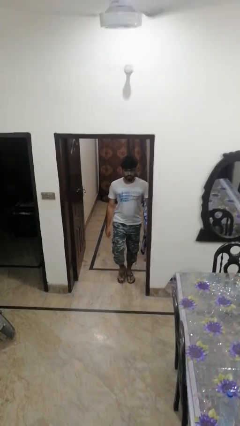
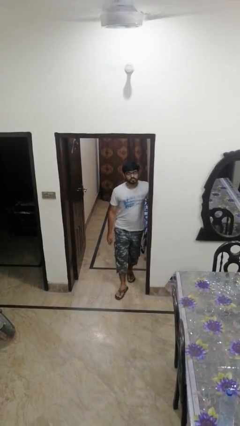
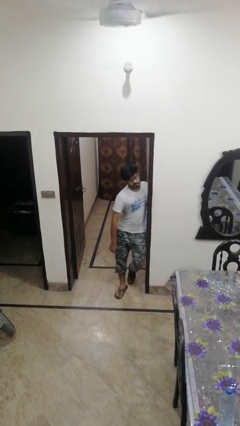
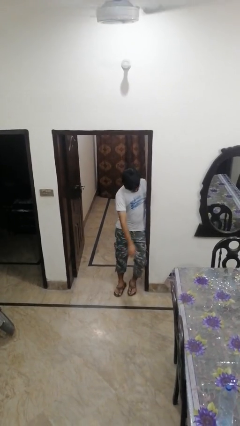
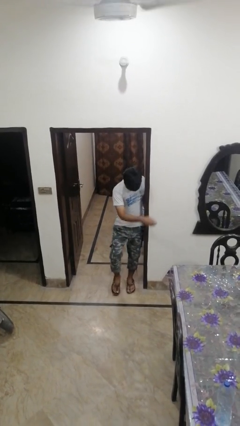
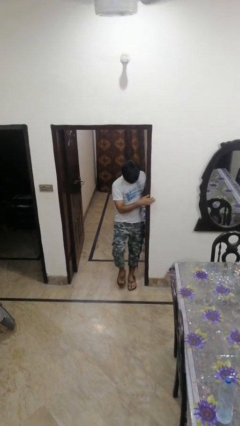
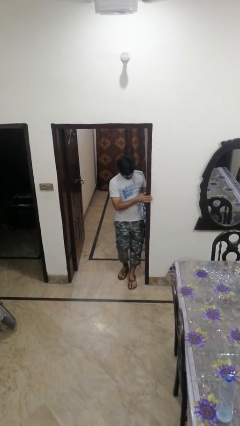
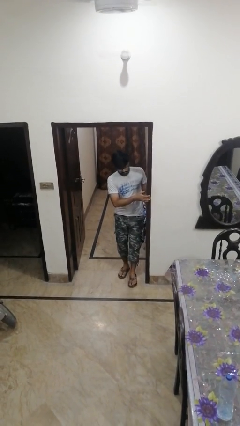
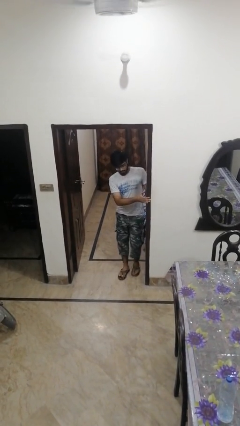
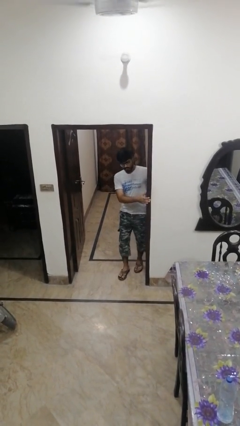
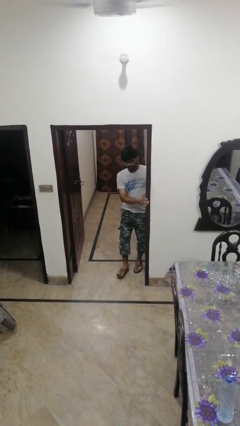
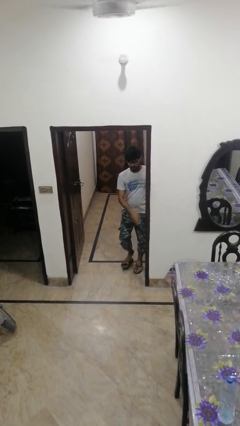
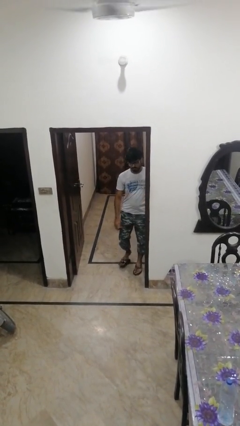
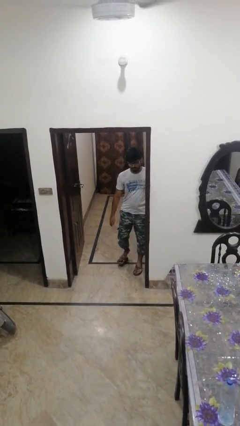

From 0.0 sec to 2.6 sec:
person bumps into wall

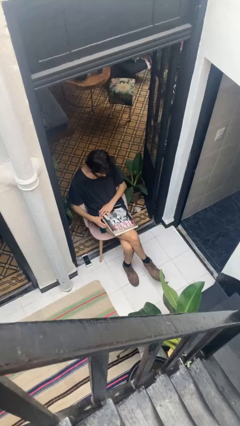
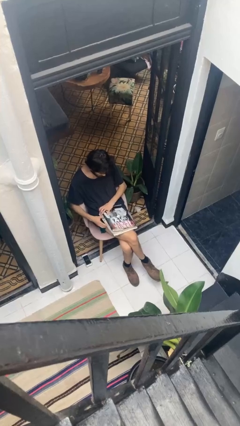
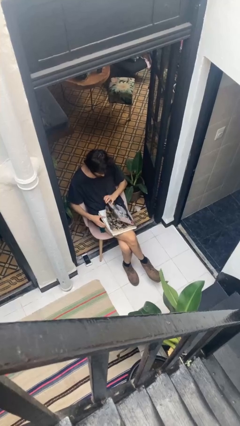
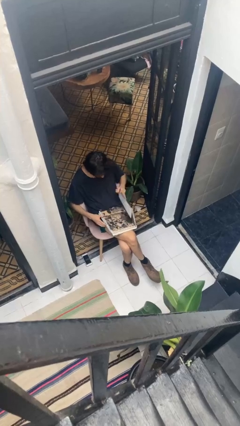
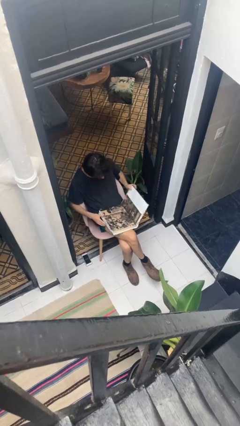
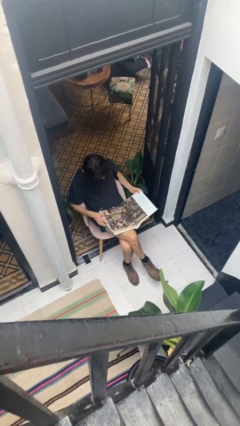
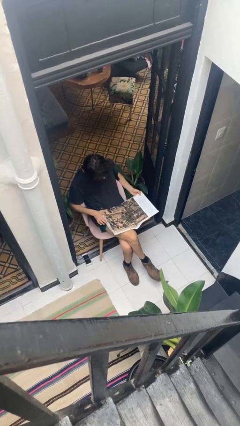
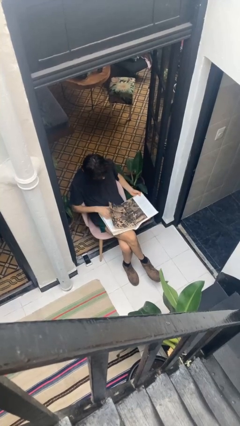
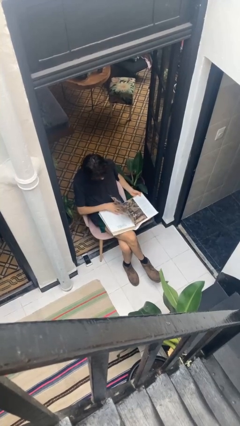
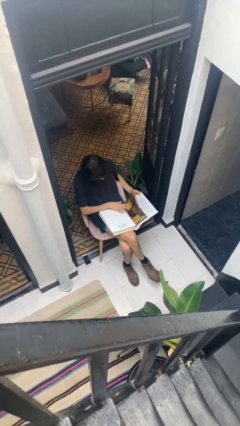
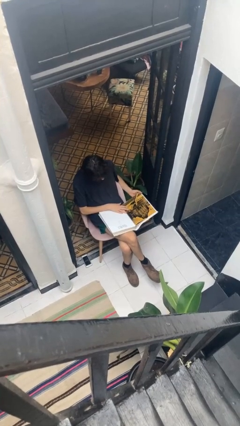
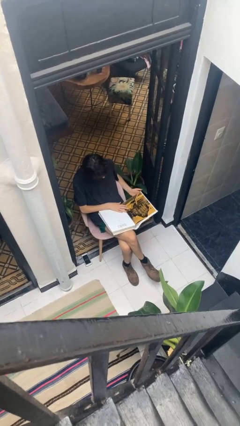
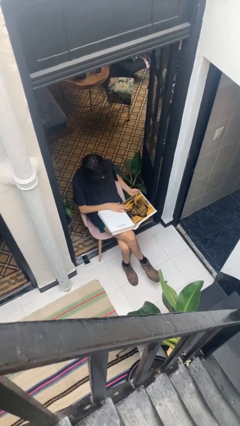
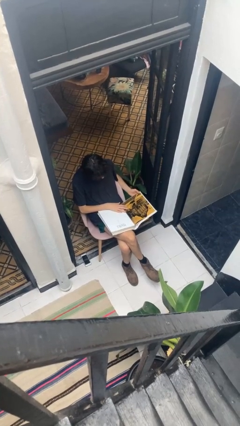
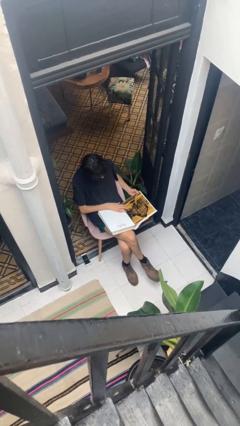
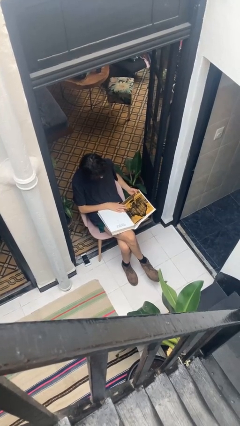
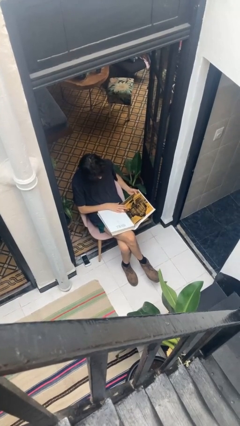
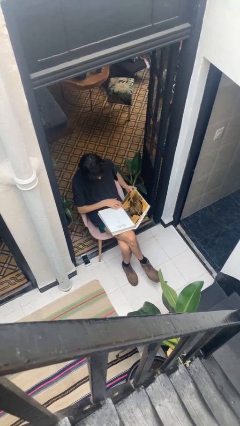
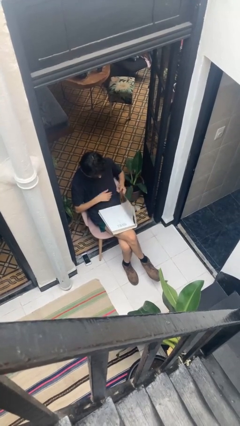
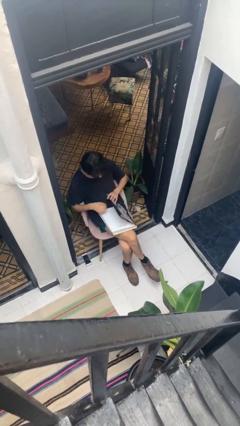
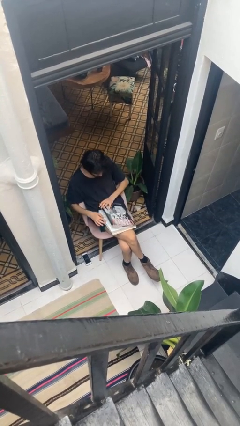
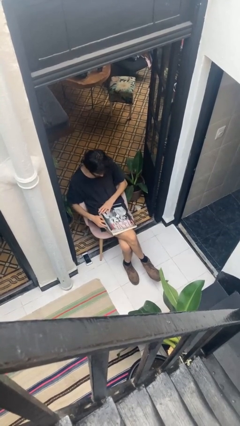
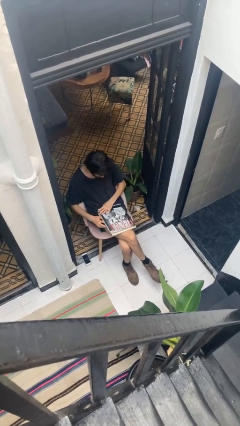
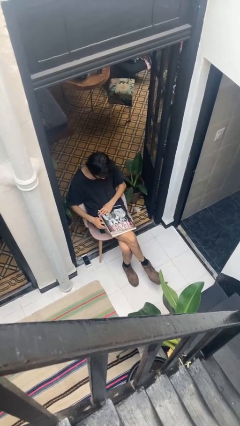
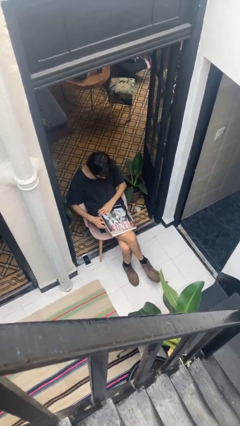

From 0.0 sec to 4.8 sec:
person reads document

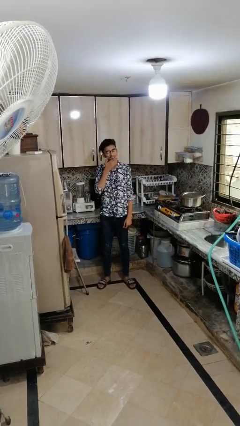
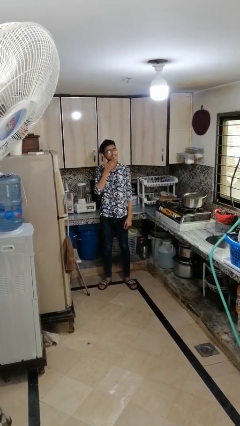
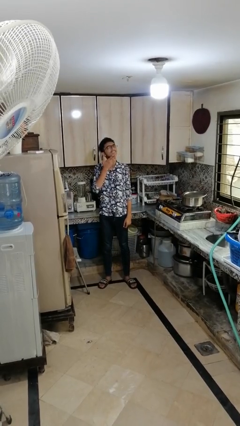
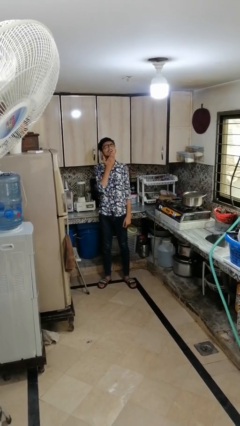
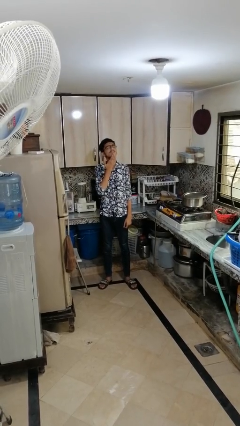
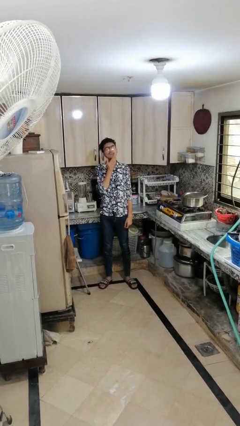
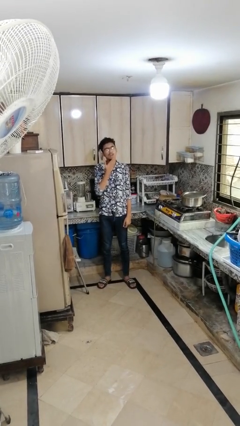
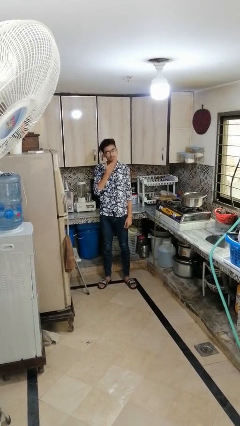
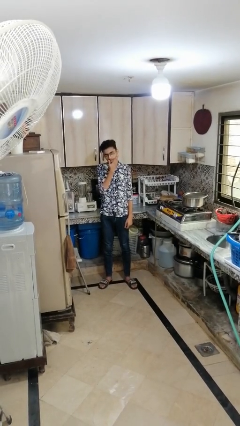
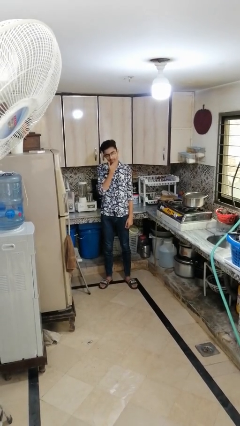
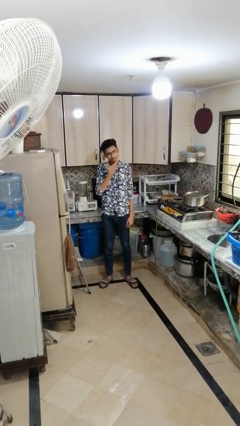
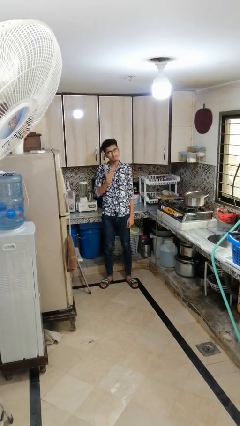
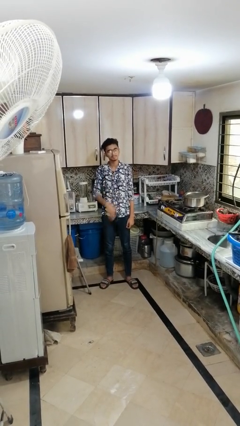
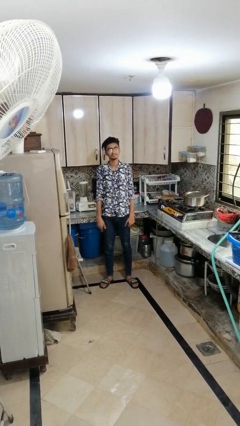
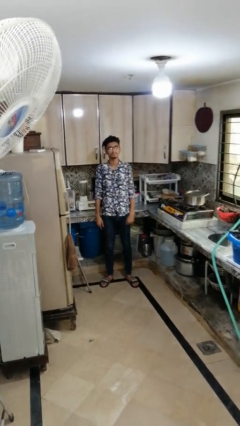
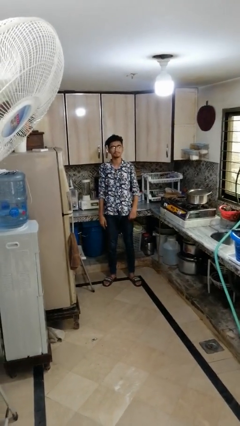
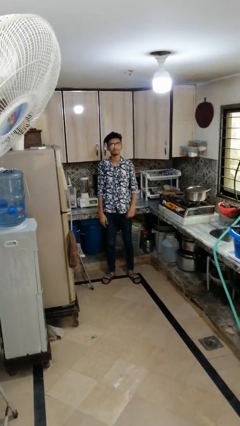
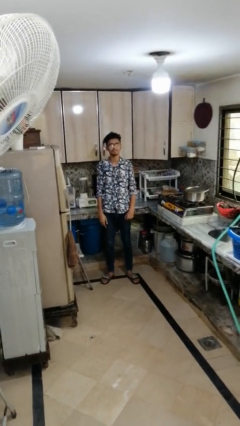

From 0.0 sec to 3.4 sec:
person strokes chin

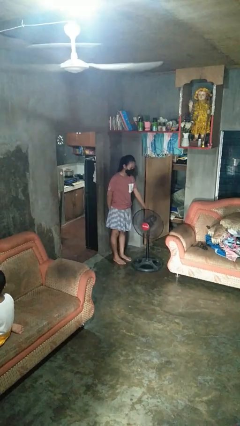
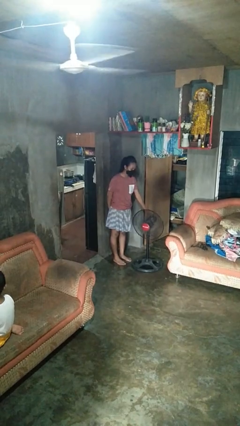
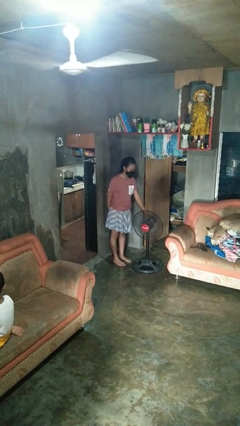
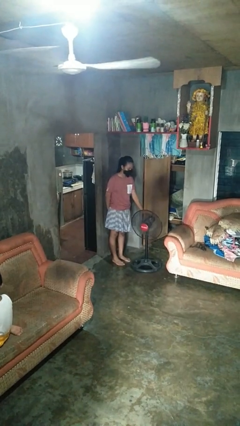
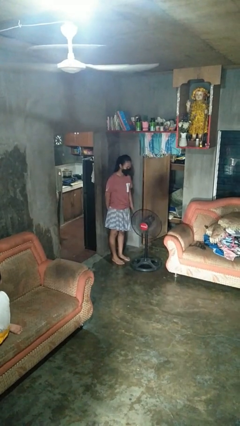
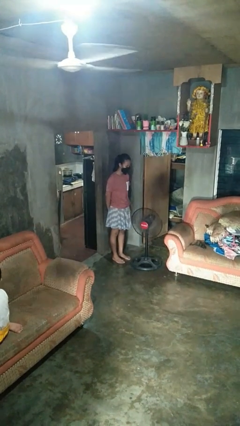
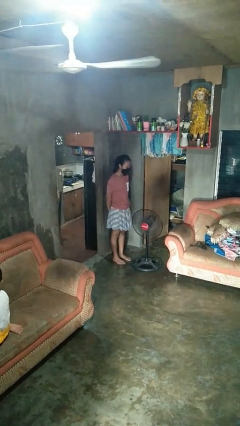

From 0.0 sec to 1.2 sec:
person turns off fan

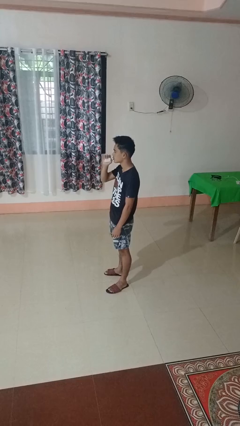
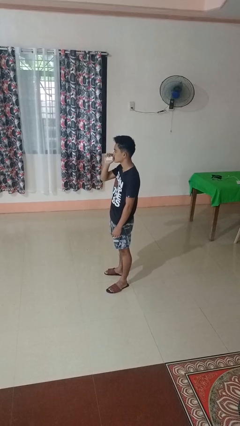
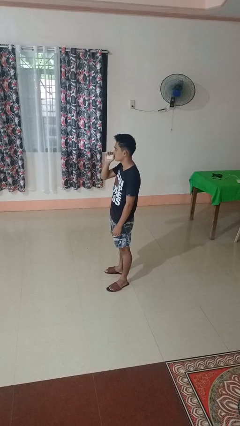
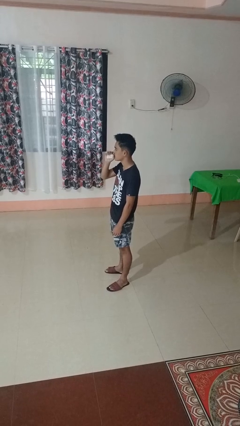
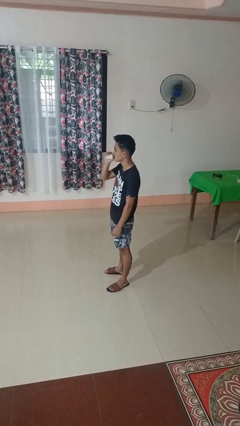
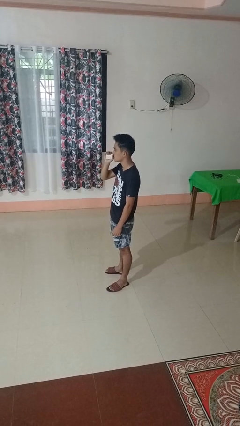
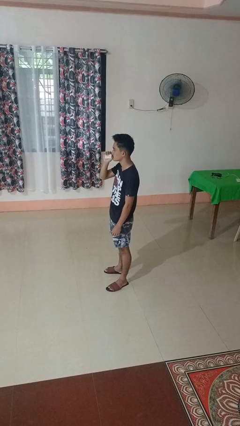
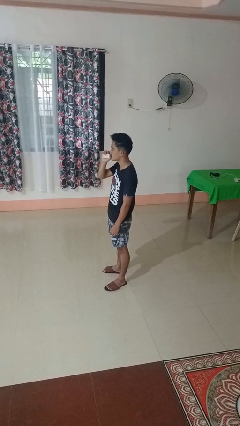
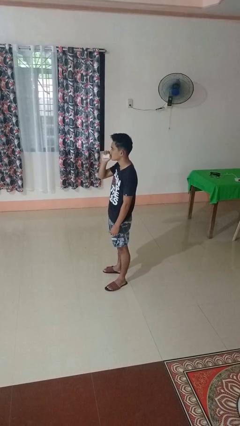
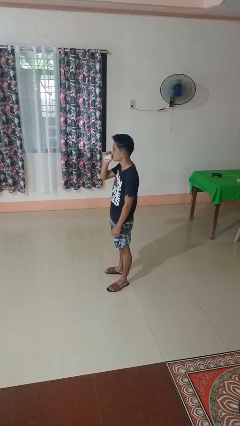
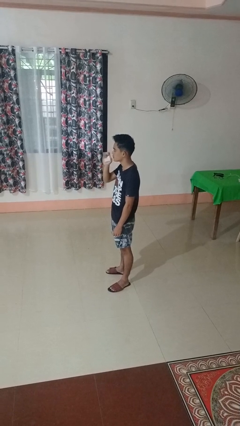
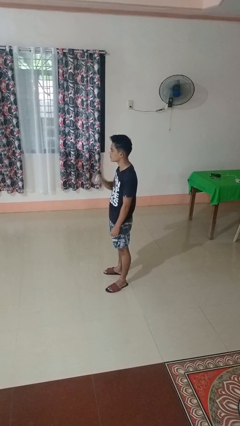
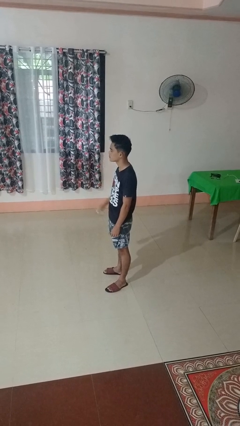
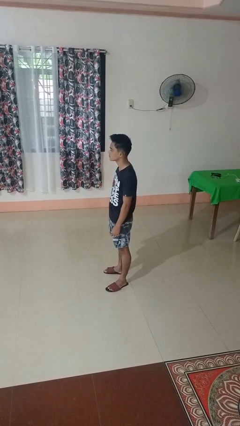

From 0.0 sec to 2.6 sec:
person vapes

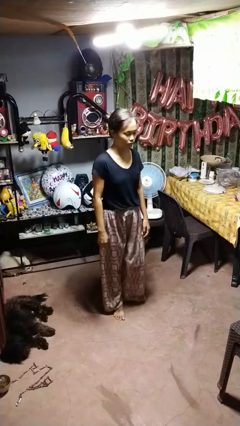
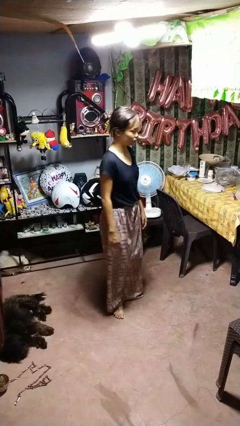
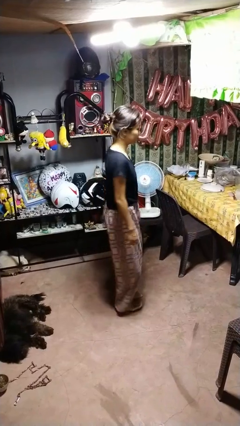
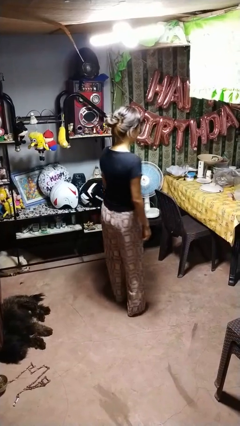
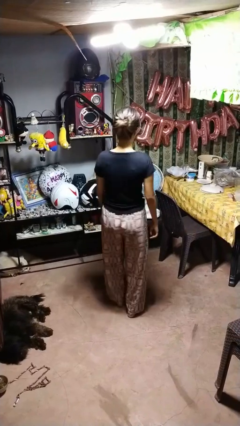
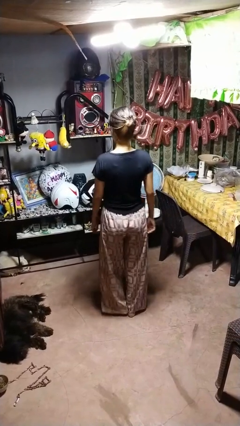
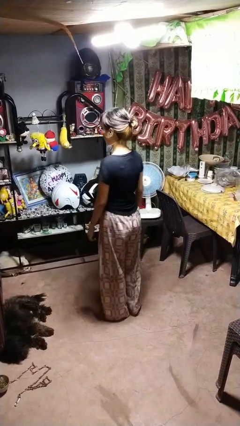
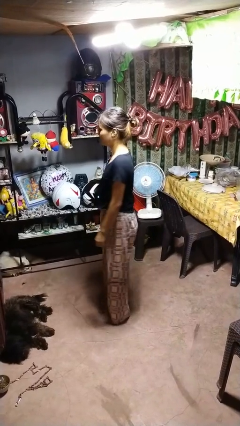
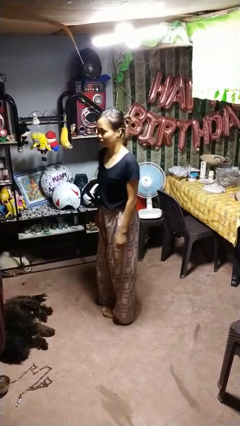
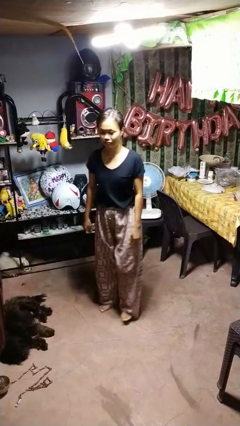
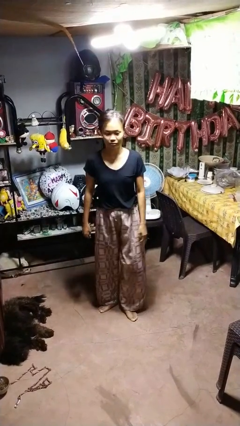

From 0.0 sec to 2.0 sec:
person twirls

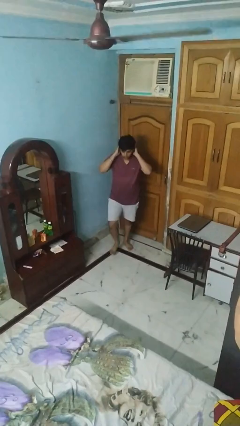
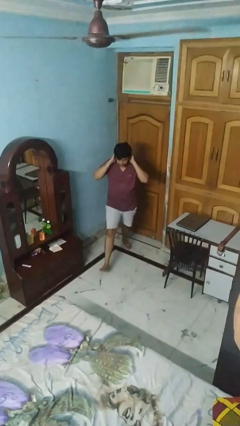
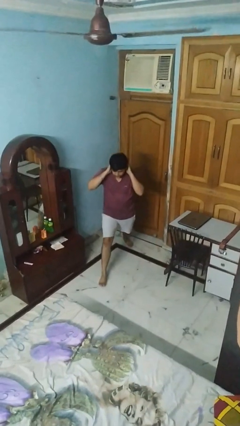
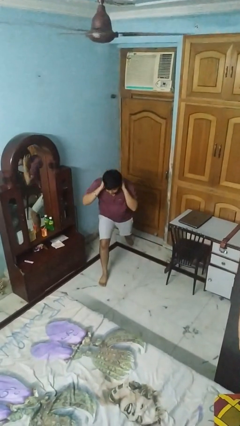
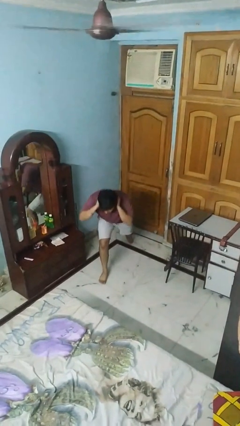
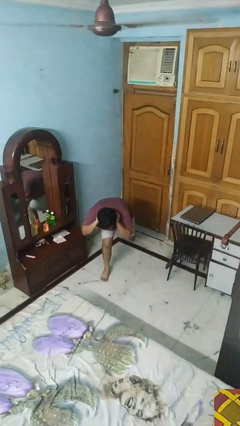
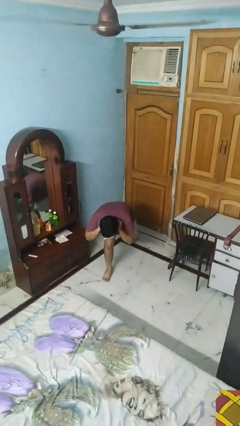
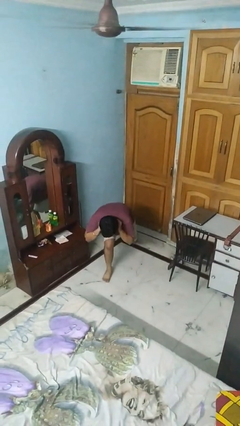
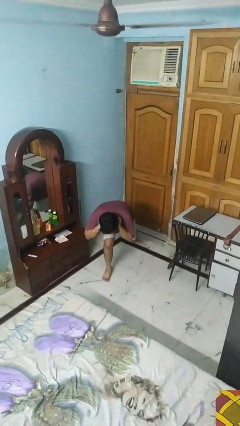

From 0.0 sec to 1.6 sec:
person exercises with lunges
